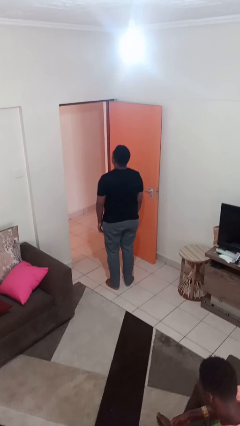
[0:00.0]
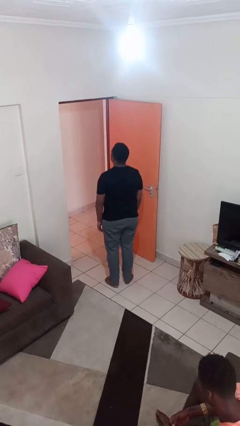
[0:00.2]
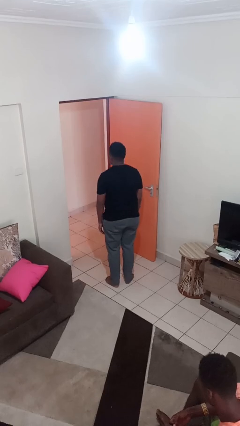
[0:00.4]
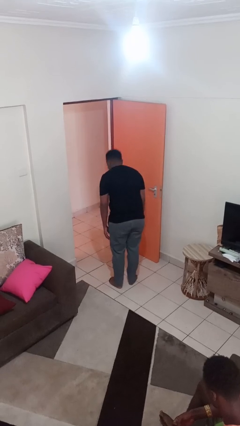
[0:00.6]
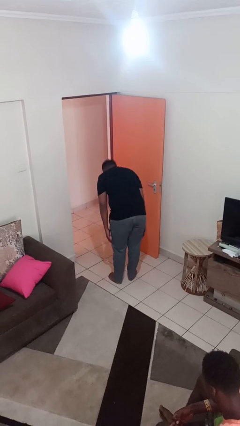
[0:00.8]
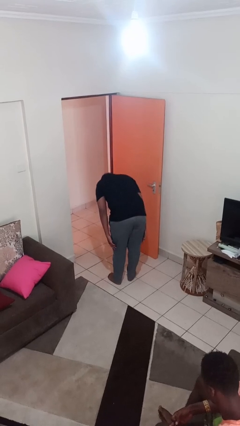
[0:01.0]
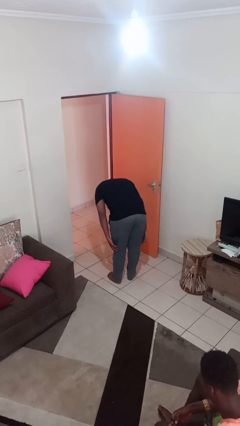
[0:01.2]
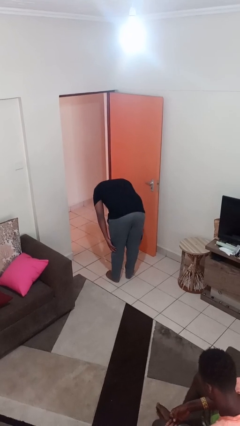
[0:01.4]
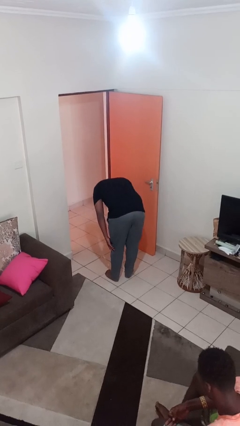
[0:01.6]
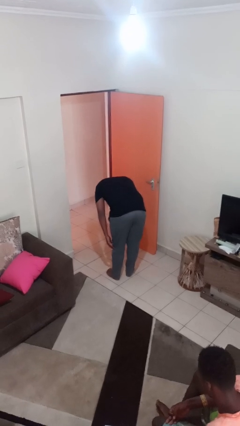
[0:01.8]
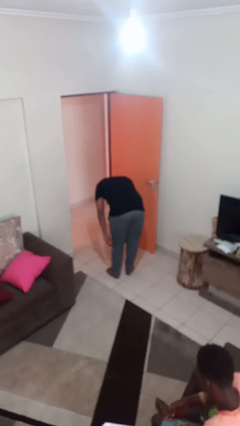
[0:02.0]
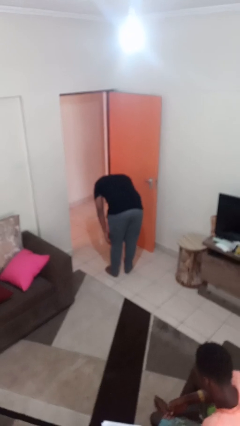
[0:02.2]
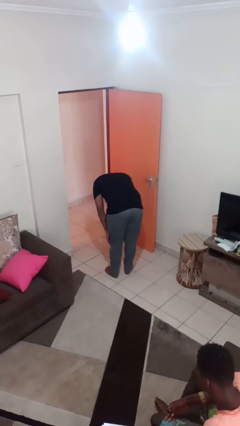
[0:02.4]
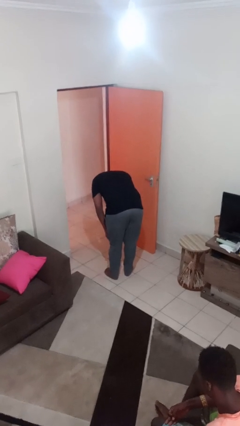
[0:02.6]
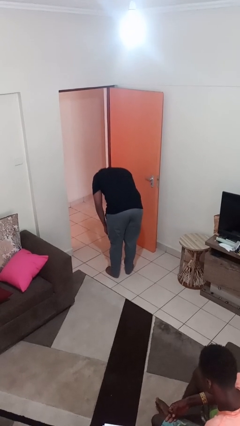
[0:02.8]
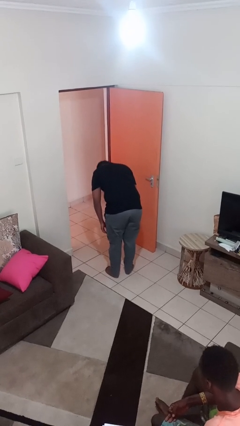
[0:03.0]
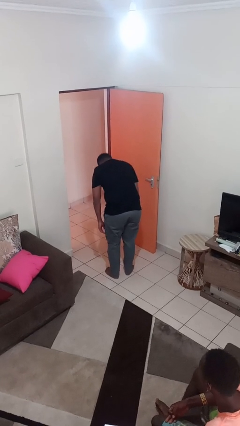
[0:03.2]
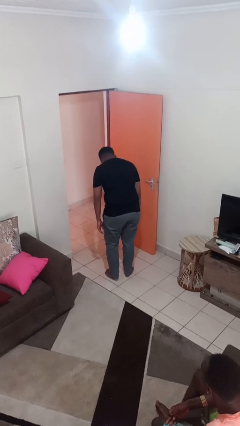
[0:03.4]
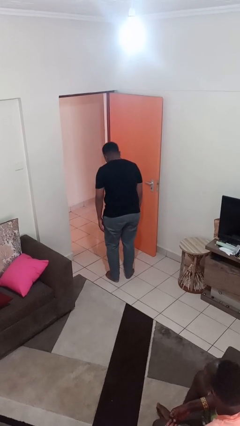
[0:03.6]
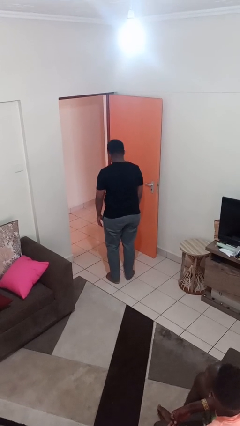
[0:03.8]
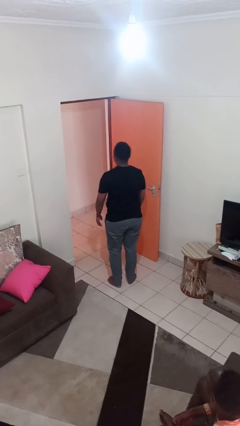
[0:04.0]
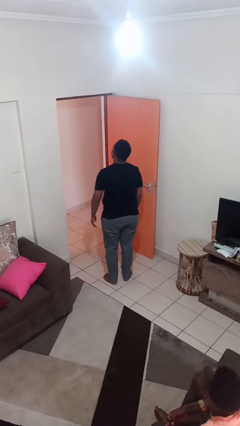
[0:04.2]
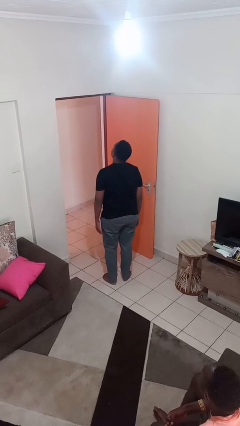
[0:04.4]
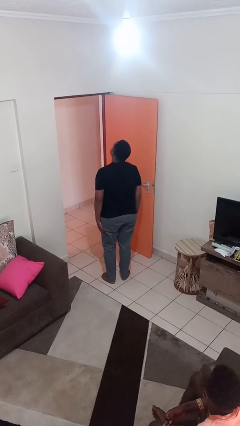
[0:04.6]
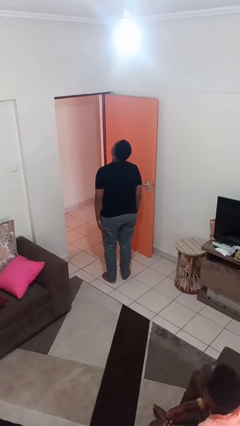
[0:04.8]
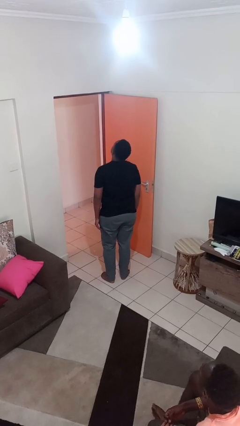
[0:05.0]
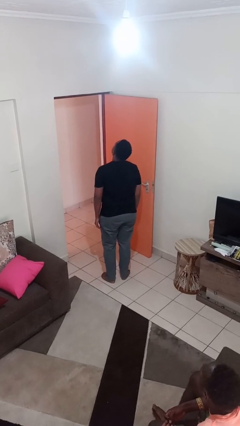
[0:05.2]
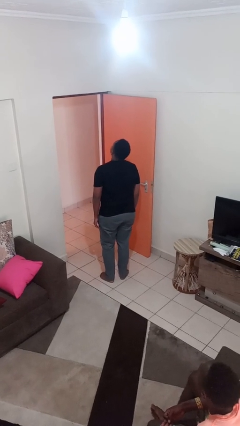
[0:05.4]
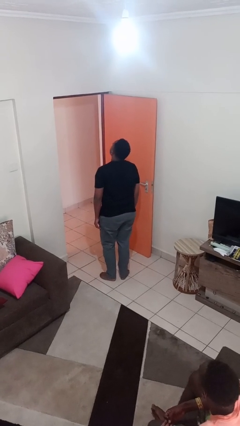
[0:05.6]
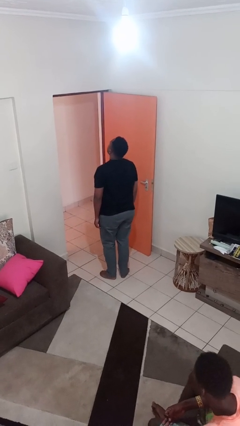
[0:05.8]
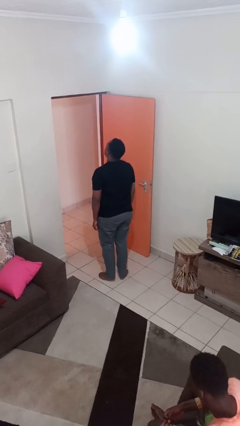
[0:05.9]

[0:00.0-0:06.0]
person bows

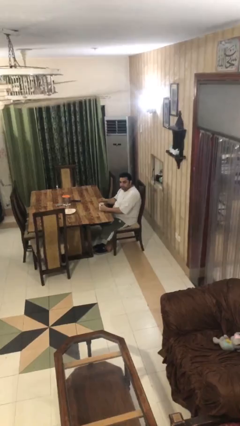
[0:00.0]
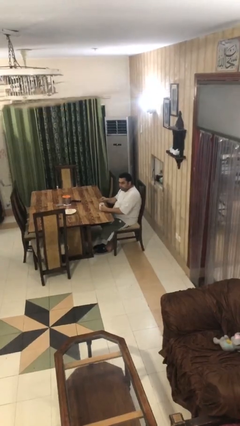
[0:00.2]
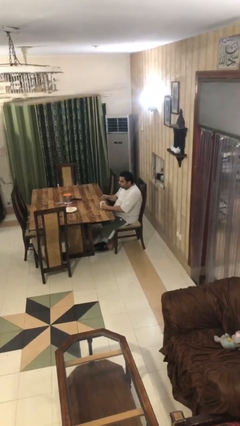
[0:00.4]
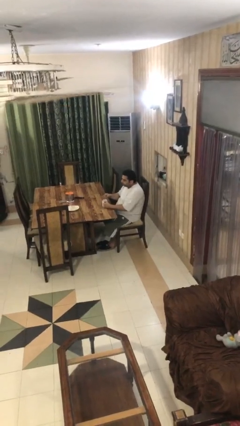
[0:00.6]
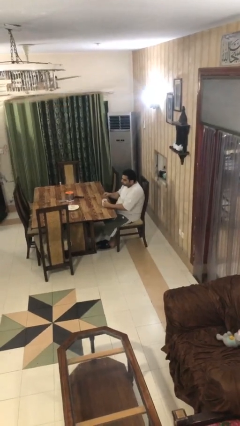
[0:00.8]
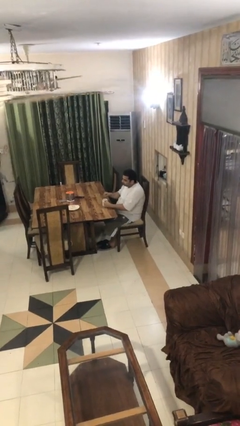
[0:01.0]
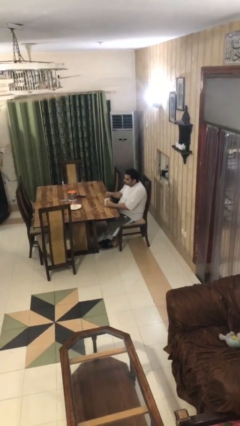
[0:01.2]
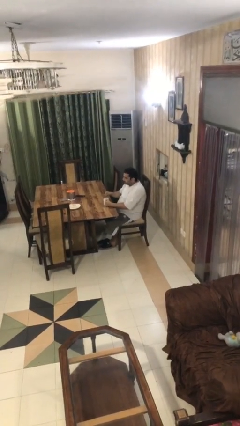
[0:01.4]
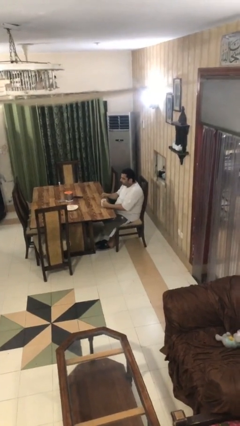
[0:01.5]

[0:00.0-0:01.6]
person stirs mug

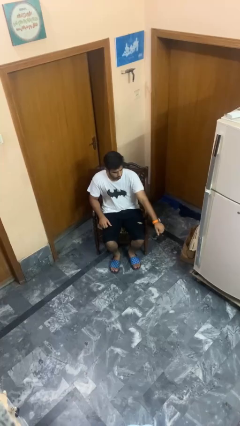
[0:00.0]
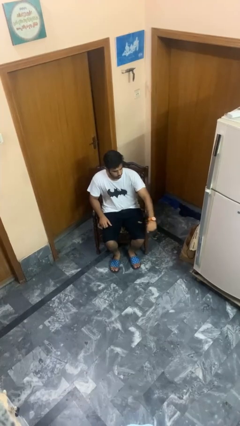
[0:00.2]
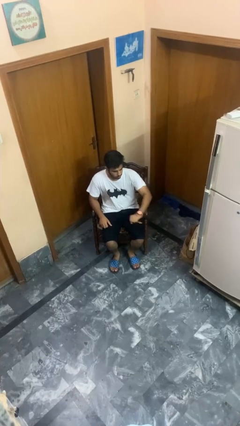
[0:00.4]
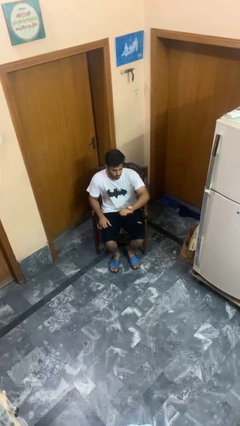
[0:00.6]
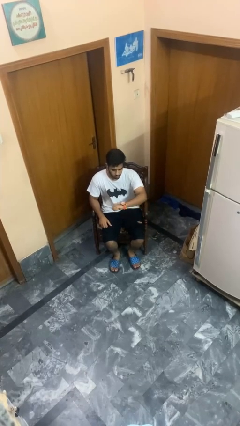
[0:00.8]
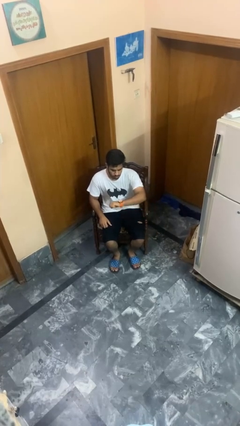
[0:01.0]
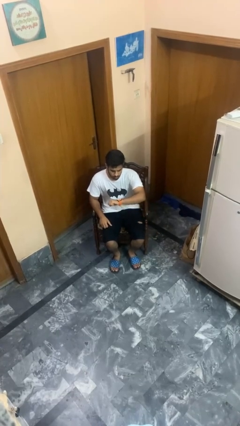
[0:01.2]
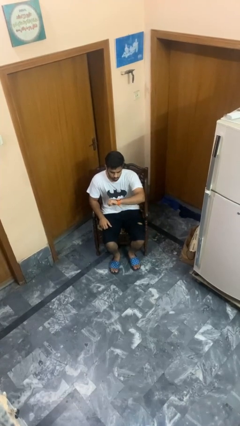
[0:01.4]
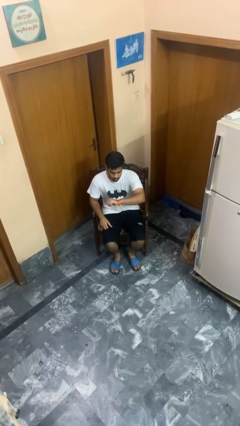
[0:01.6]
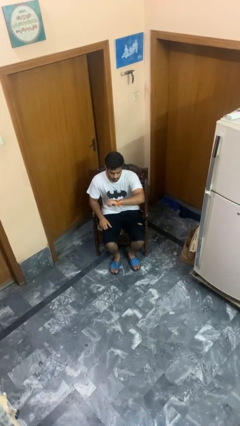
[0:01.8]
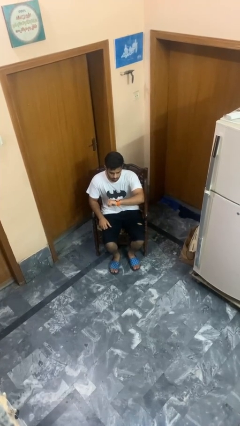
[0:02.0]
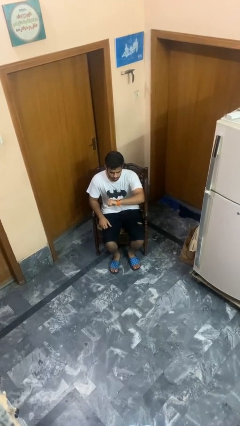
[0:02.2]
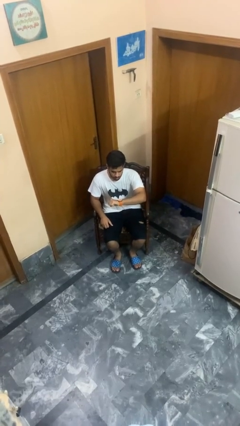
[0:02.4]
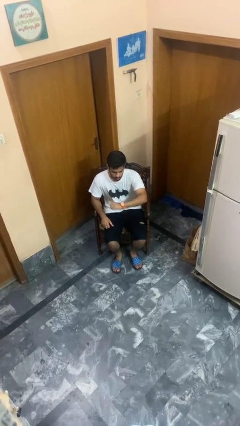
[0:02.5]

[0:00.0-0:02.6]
person looks at wristwatch

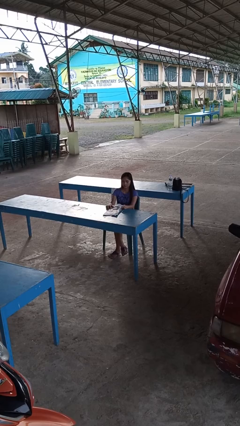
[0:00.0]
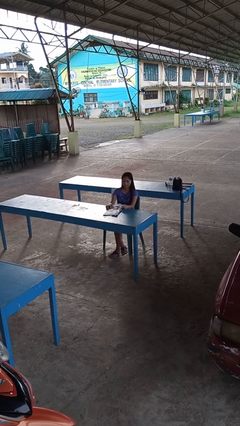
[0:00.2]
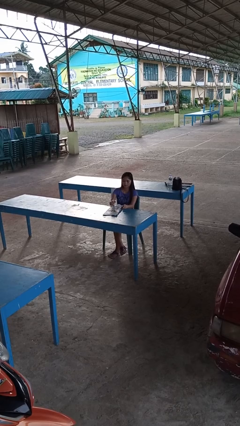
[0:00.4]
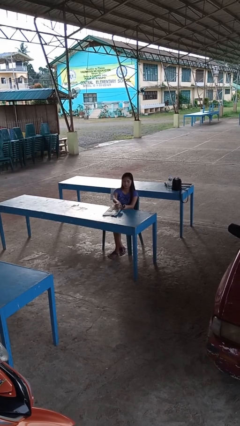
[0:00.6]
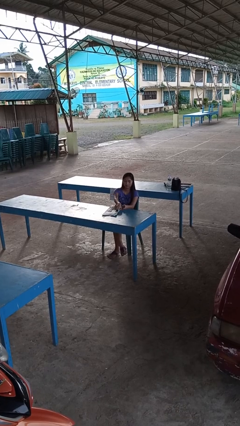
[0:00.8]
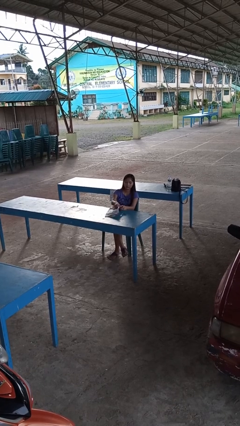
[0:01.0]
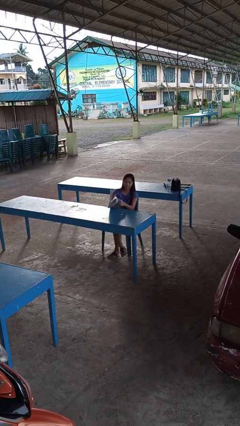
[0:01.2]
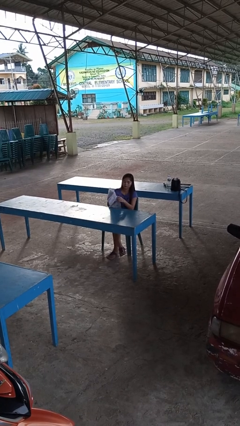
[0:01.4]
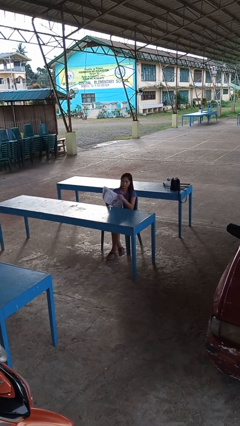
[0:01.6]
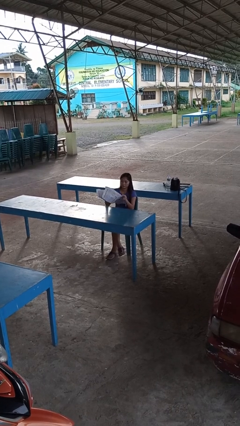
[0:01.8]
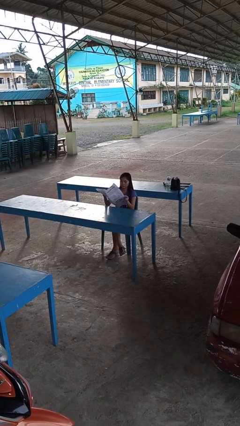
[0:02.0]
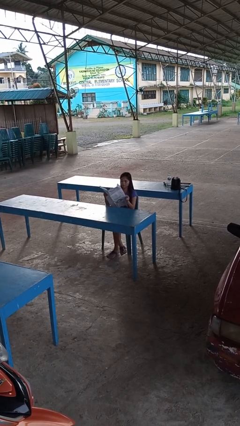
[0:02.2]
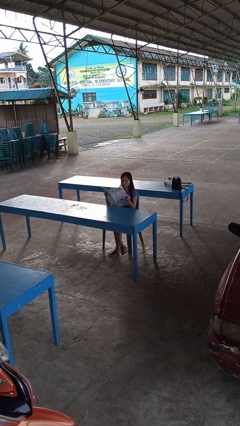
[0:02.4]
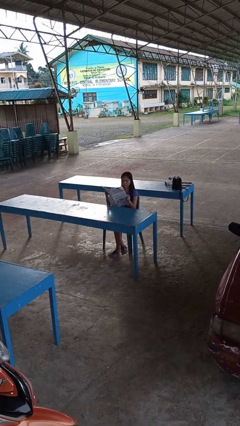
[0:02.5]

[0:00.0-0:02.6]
person reads newspaper

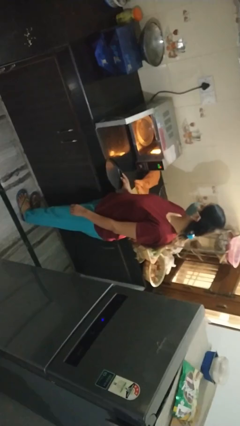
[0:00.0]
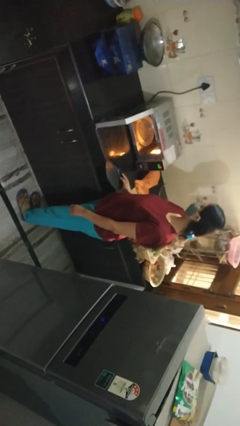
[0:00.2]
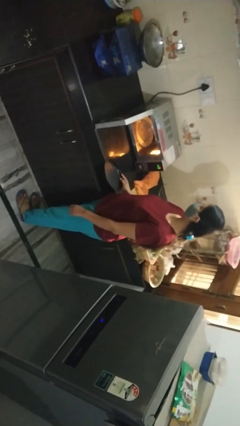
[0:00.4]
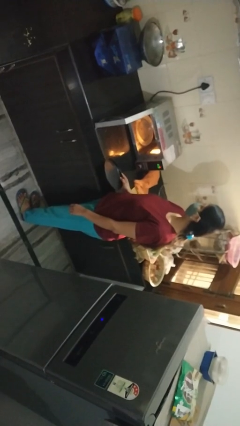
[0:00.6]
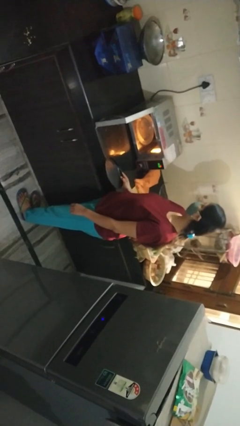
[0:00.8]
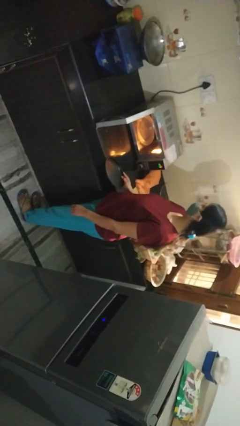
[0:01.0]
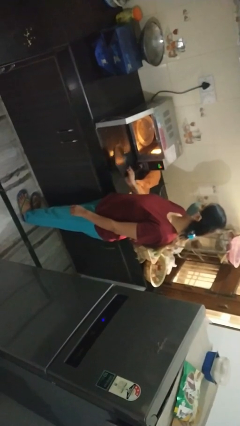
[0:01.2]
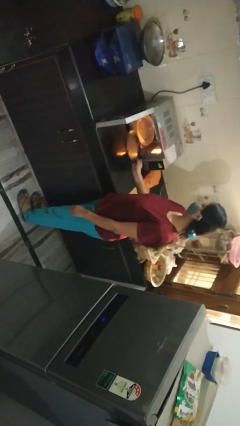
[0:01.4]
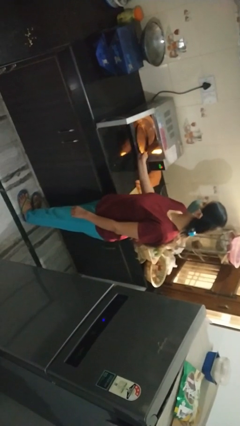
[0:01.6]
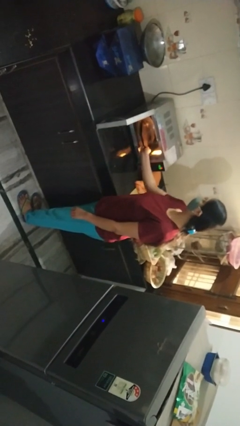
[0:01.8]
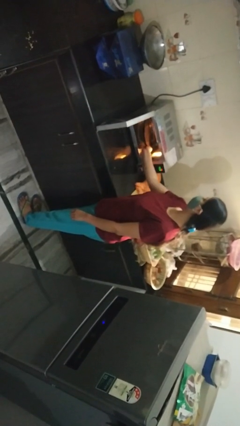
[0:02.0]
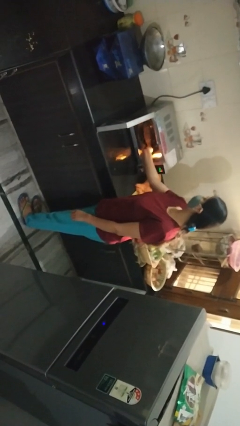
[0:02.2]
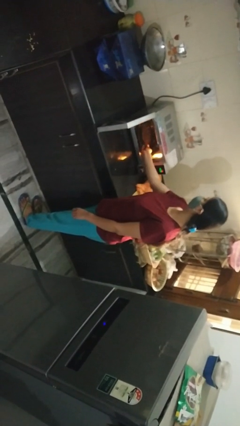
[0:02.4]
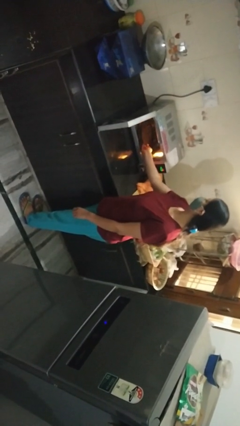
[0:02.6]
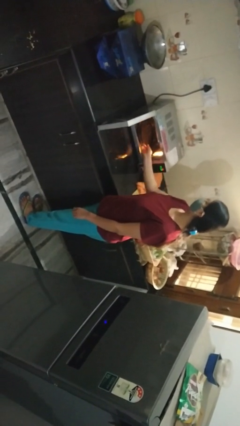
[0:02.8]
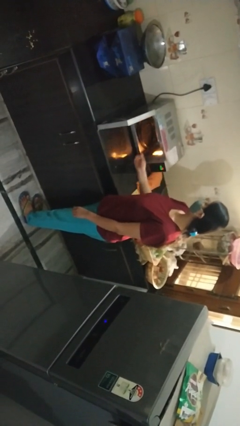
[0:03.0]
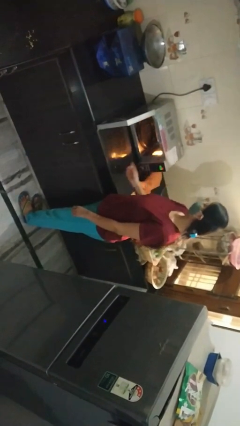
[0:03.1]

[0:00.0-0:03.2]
person puts object into microwave

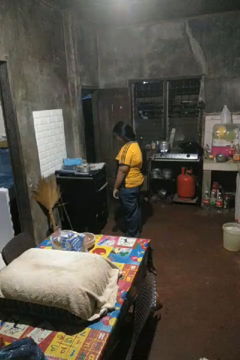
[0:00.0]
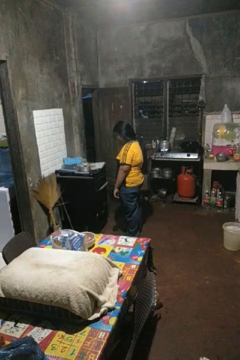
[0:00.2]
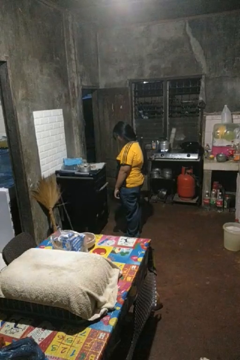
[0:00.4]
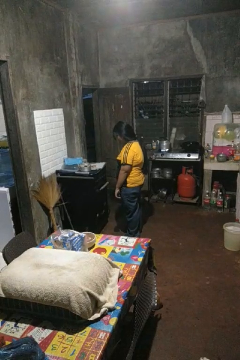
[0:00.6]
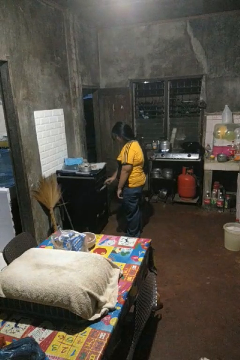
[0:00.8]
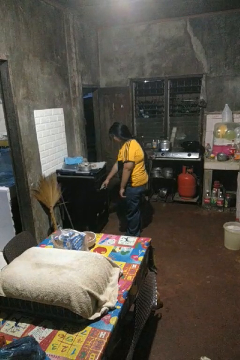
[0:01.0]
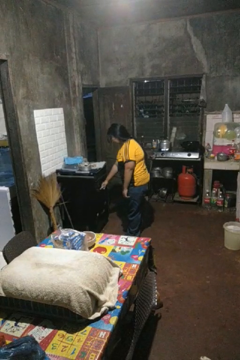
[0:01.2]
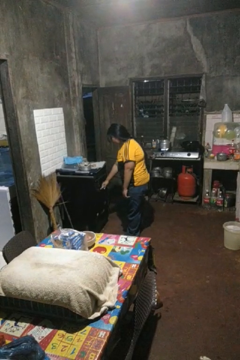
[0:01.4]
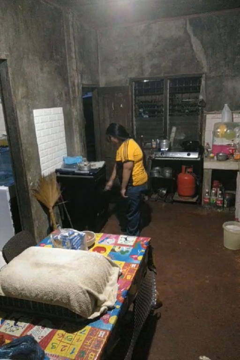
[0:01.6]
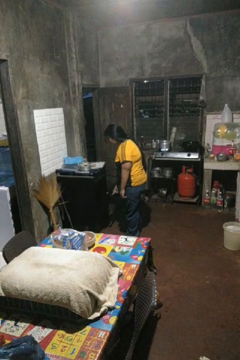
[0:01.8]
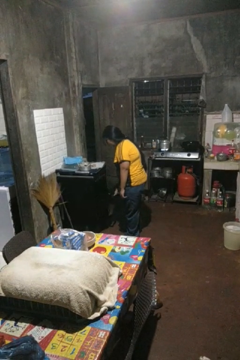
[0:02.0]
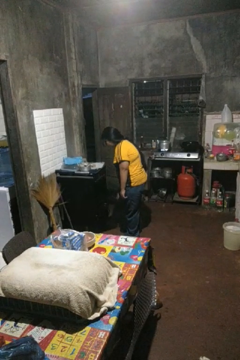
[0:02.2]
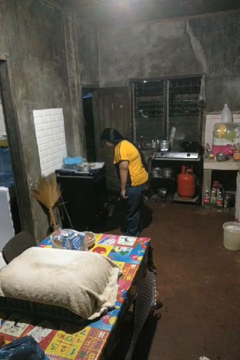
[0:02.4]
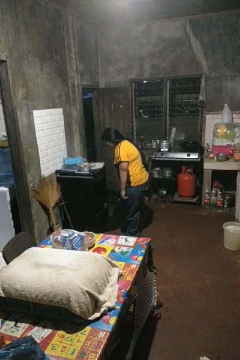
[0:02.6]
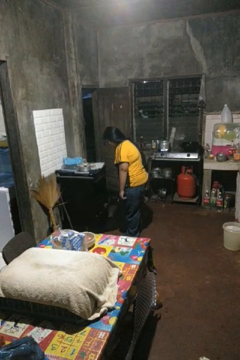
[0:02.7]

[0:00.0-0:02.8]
person opens oven door
